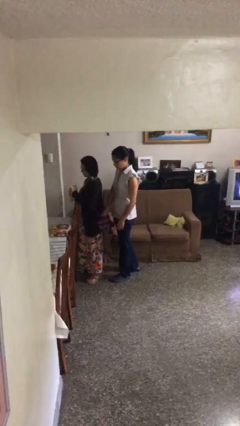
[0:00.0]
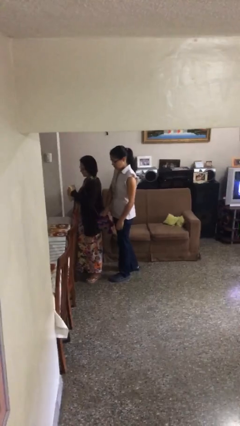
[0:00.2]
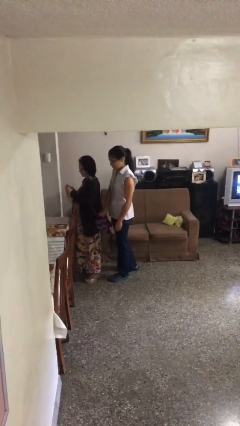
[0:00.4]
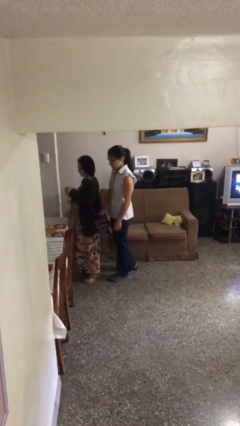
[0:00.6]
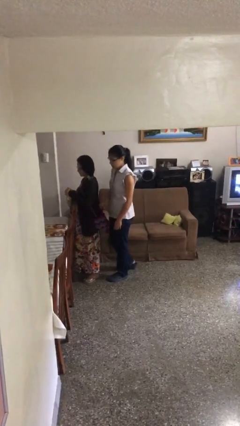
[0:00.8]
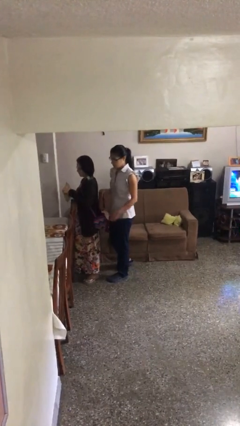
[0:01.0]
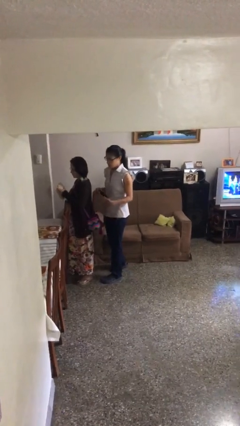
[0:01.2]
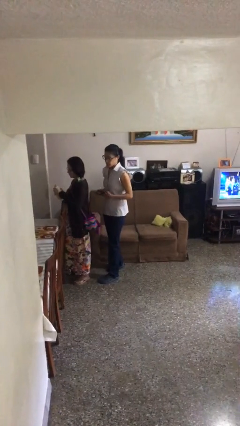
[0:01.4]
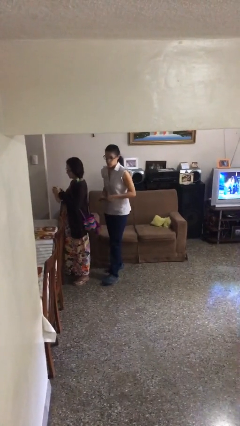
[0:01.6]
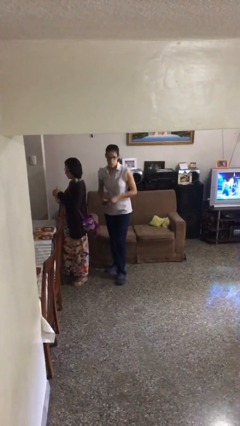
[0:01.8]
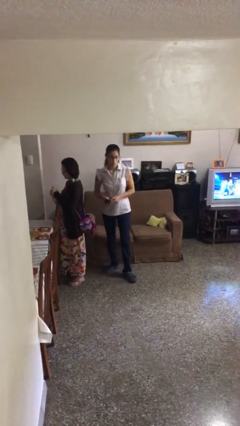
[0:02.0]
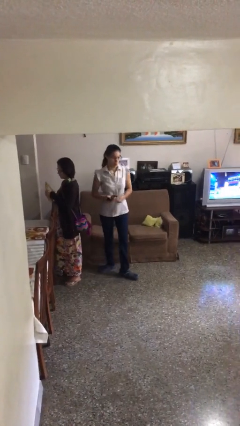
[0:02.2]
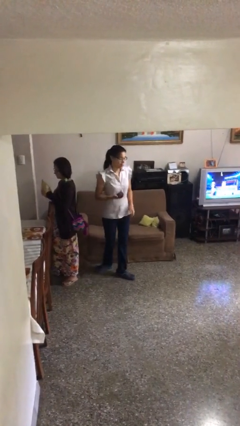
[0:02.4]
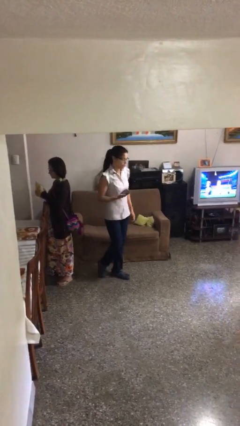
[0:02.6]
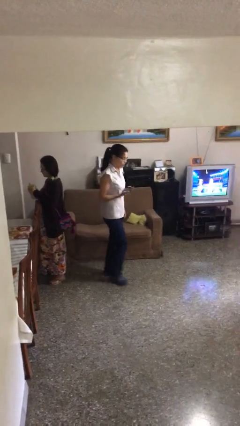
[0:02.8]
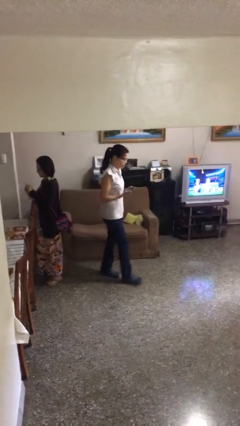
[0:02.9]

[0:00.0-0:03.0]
person steals object from person

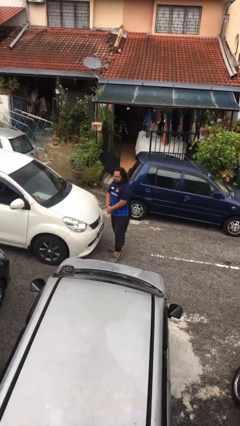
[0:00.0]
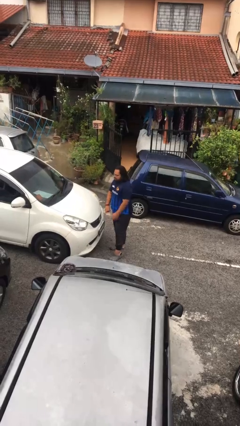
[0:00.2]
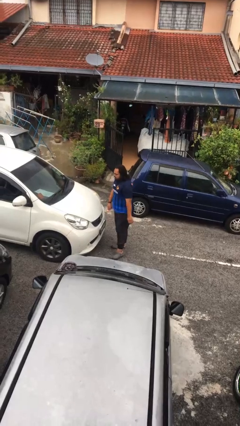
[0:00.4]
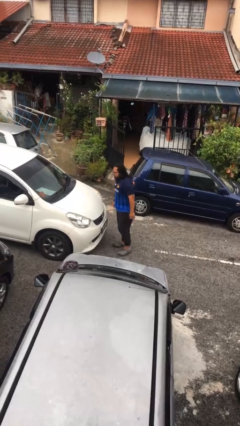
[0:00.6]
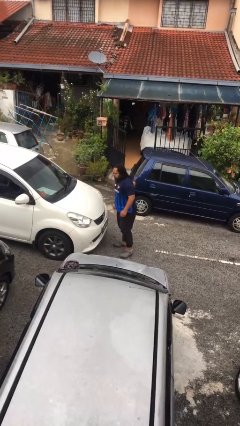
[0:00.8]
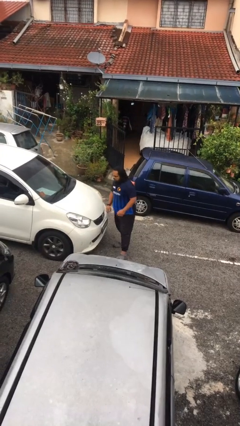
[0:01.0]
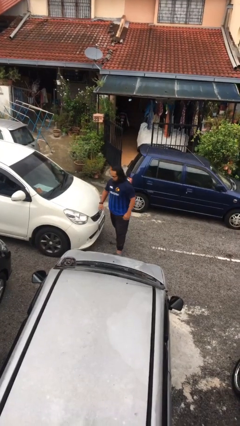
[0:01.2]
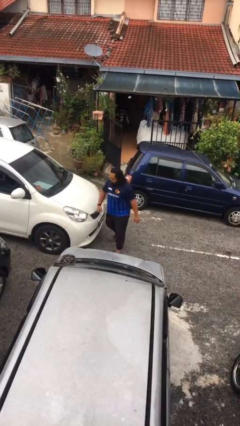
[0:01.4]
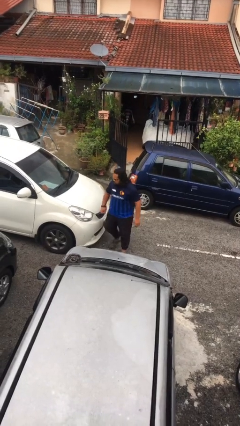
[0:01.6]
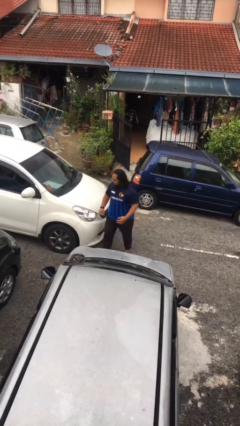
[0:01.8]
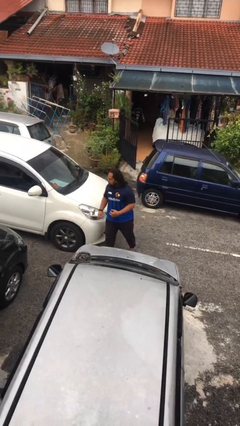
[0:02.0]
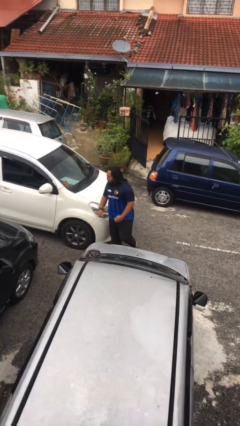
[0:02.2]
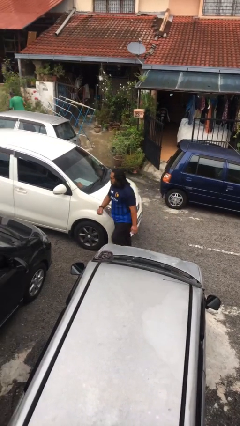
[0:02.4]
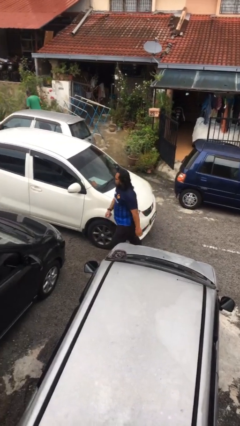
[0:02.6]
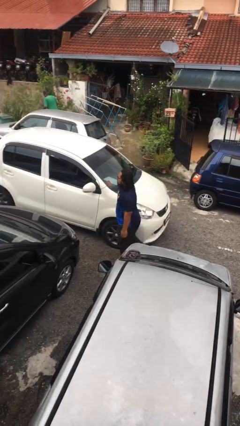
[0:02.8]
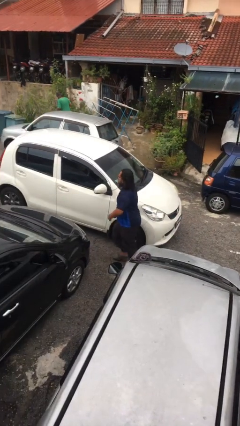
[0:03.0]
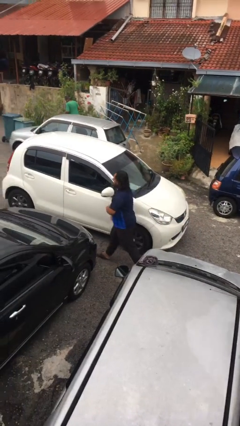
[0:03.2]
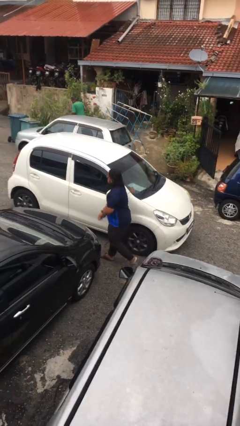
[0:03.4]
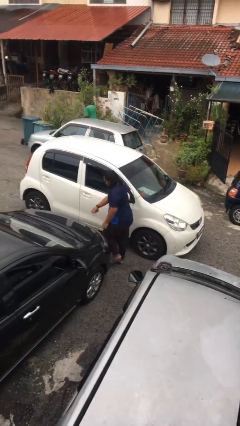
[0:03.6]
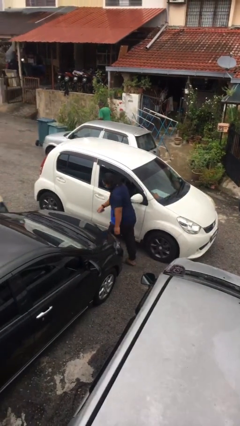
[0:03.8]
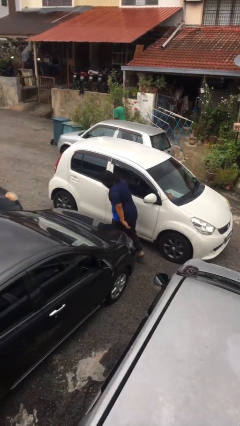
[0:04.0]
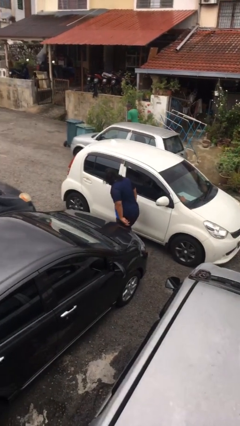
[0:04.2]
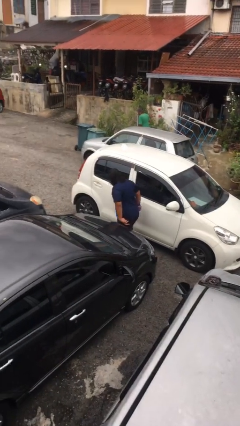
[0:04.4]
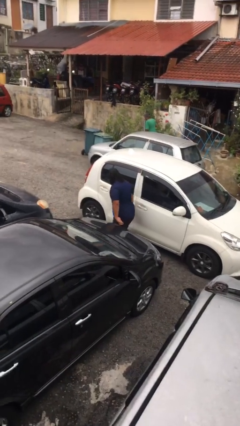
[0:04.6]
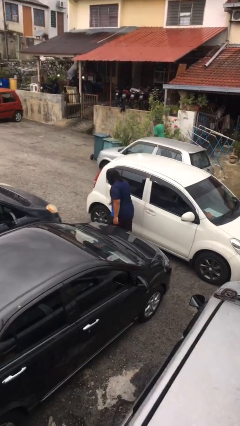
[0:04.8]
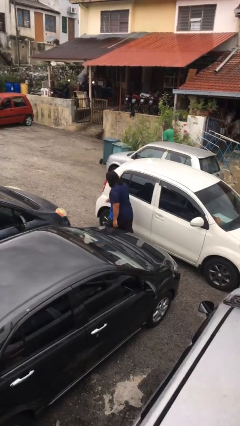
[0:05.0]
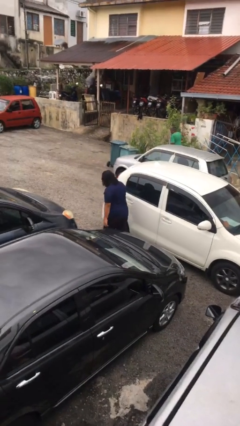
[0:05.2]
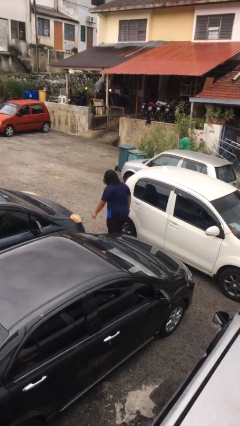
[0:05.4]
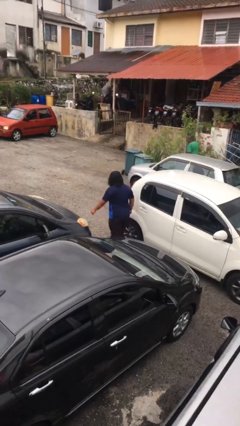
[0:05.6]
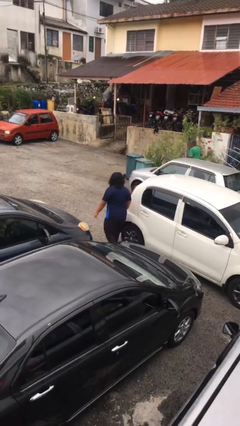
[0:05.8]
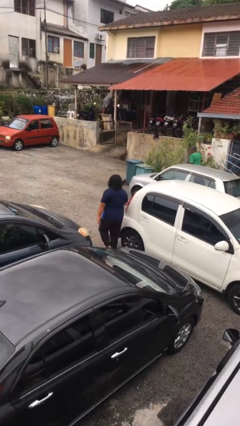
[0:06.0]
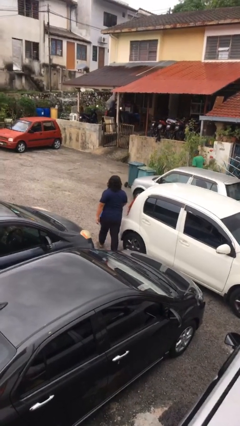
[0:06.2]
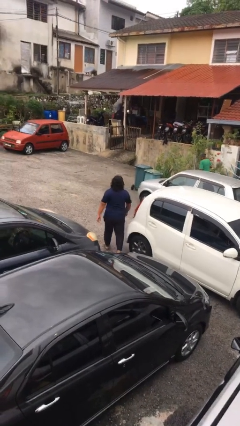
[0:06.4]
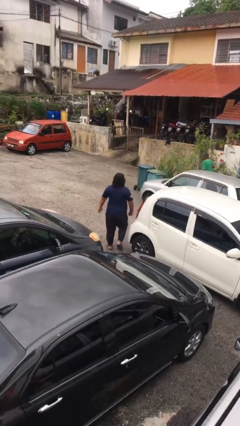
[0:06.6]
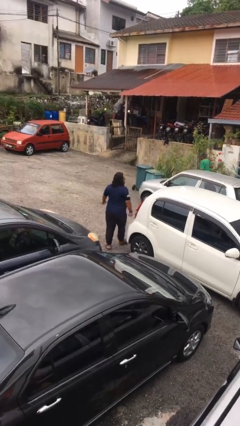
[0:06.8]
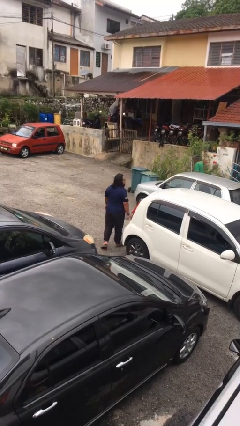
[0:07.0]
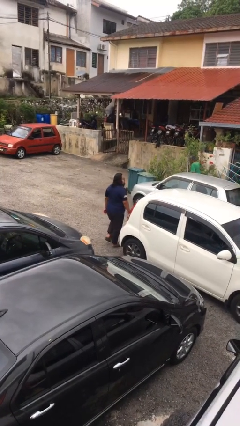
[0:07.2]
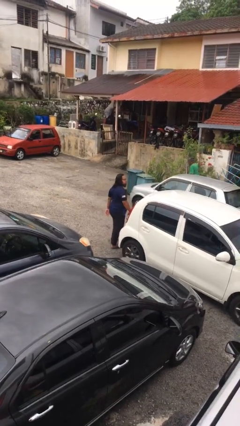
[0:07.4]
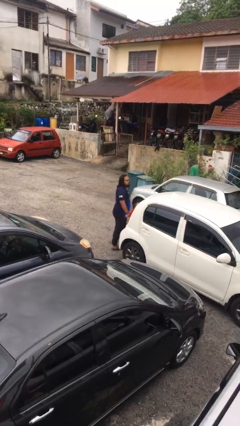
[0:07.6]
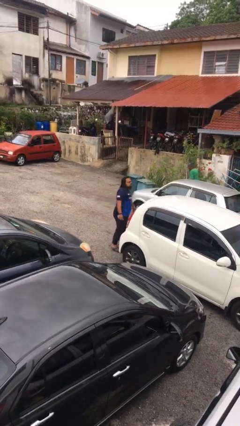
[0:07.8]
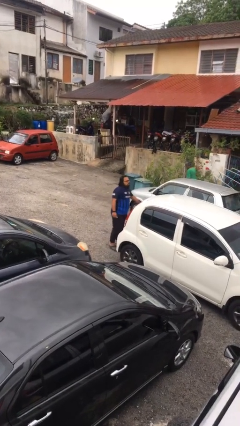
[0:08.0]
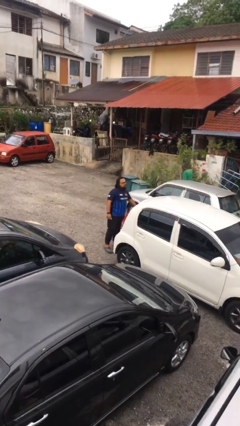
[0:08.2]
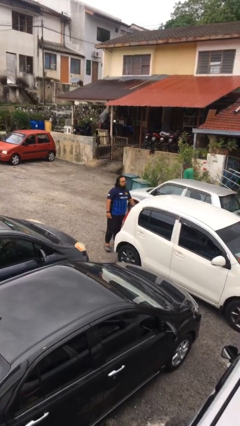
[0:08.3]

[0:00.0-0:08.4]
person walks around car

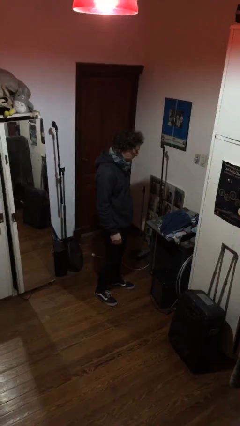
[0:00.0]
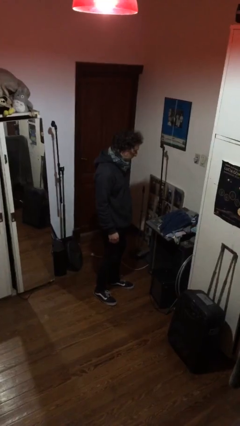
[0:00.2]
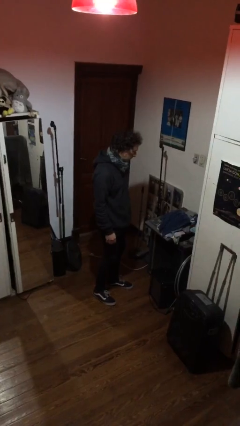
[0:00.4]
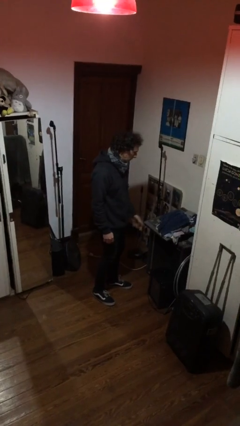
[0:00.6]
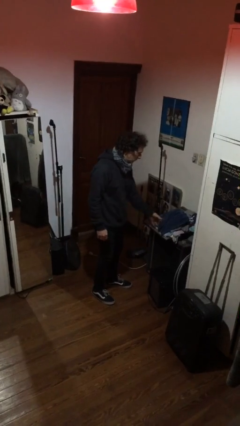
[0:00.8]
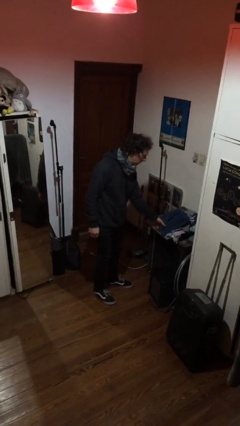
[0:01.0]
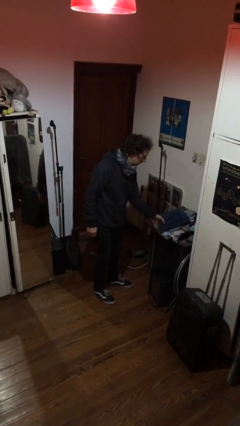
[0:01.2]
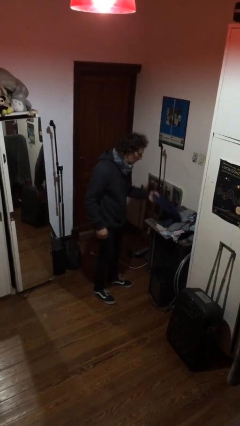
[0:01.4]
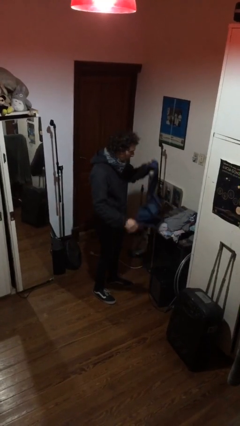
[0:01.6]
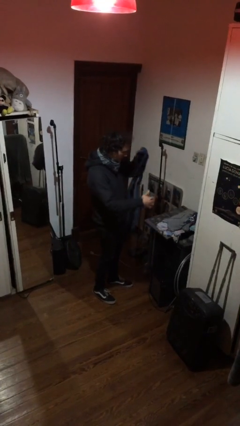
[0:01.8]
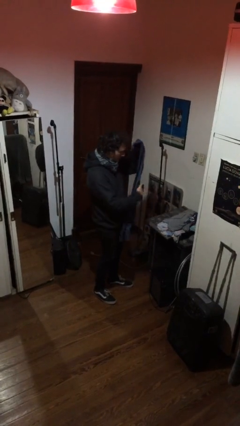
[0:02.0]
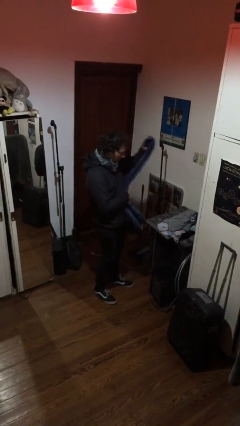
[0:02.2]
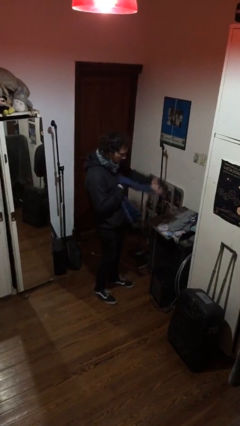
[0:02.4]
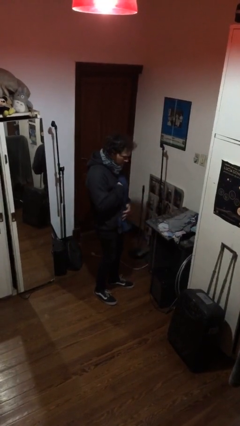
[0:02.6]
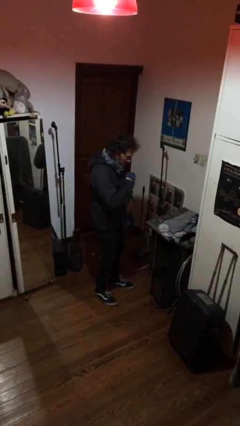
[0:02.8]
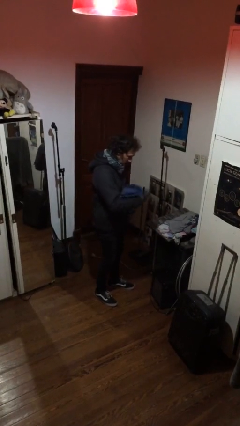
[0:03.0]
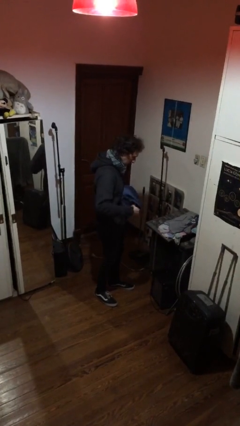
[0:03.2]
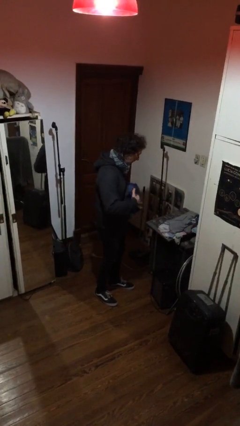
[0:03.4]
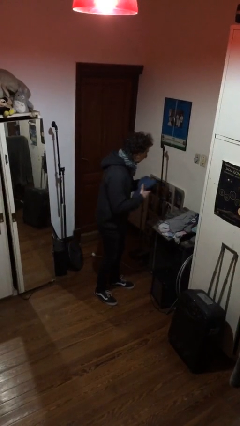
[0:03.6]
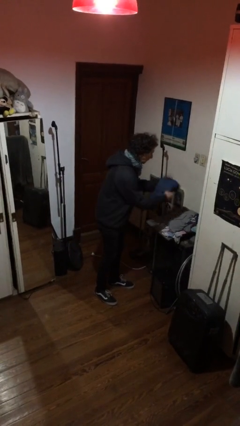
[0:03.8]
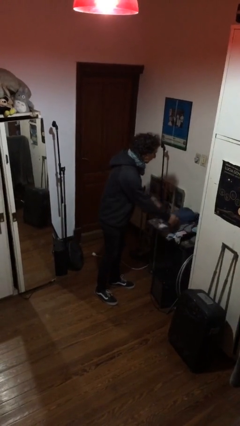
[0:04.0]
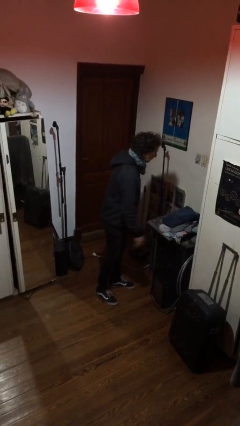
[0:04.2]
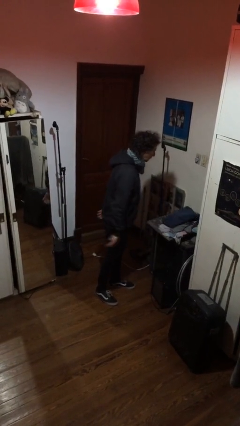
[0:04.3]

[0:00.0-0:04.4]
person folds pants

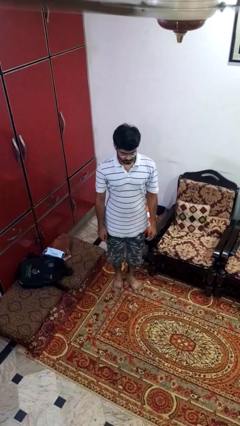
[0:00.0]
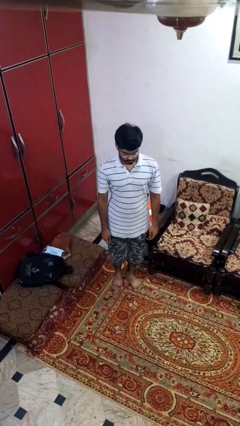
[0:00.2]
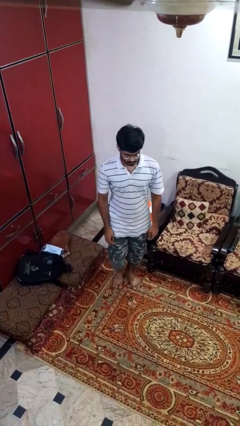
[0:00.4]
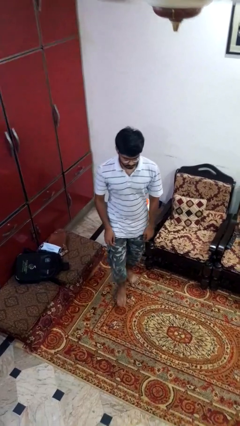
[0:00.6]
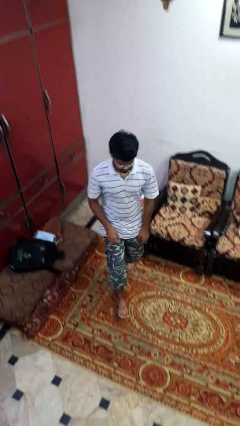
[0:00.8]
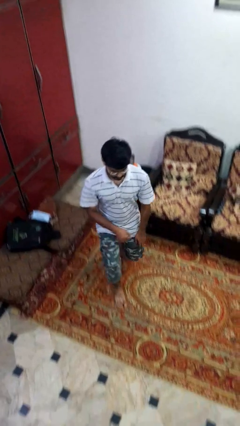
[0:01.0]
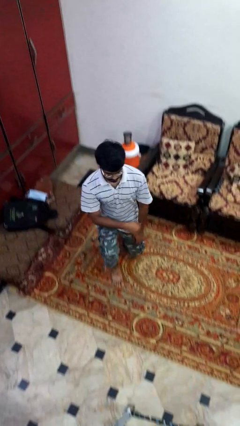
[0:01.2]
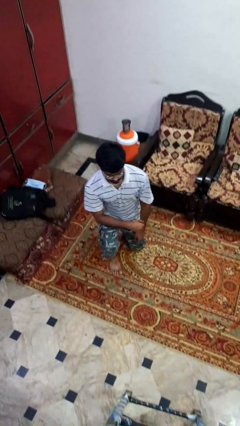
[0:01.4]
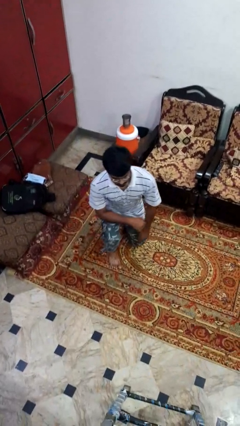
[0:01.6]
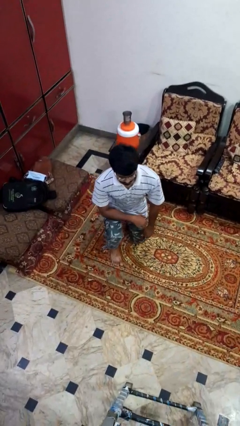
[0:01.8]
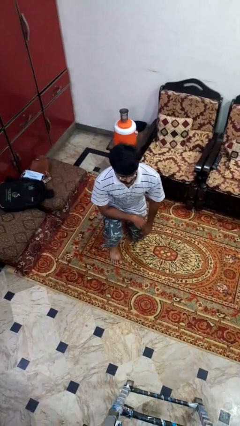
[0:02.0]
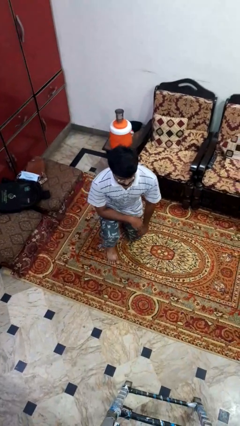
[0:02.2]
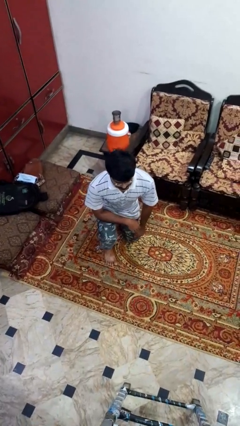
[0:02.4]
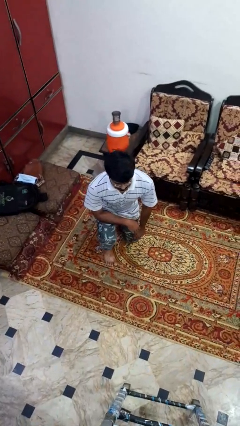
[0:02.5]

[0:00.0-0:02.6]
person kneels
